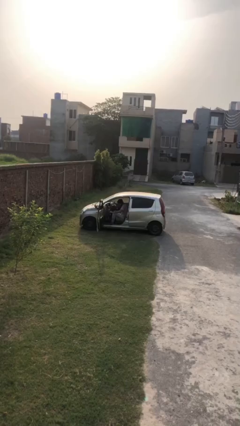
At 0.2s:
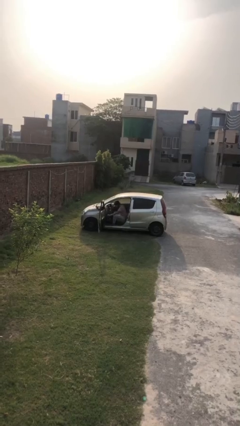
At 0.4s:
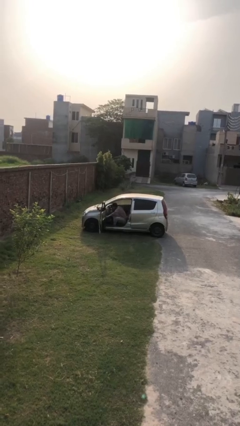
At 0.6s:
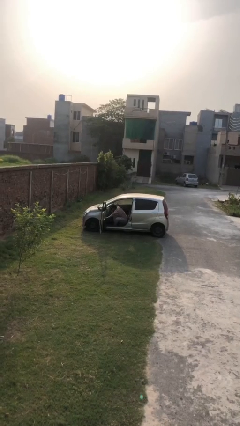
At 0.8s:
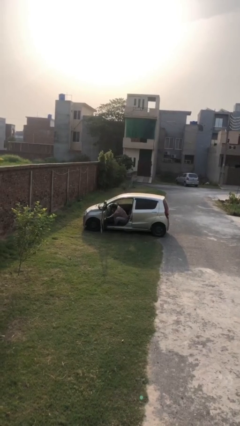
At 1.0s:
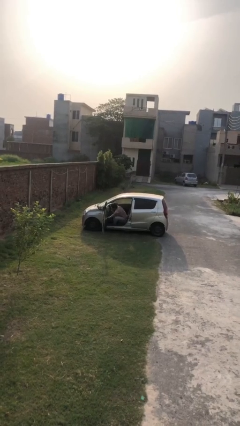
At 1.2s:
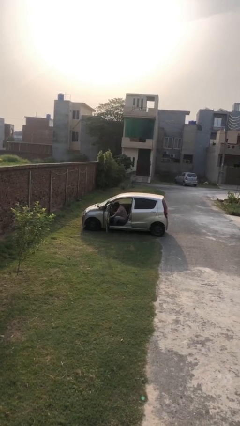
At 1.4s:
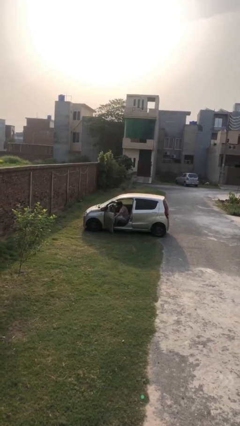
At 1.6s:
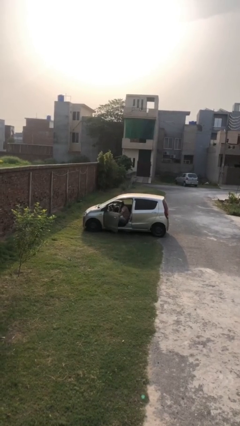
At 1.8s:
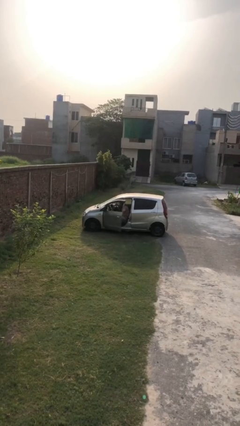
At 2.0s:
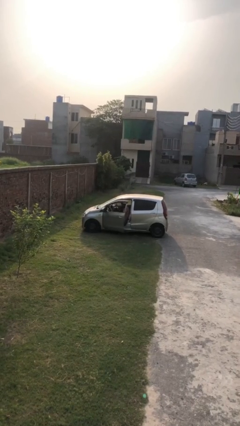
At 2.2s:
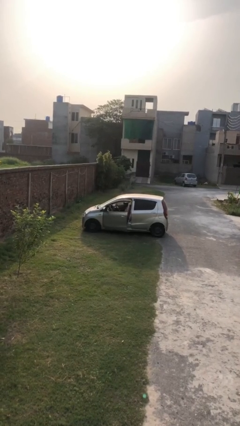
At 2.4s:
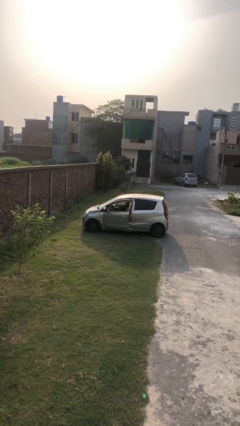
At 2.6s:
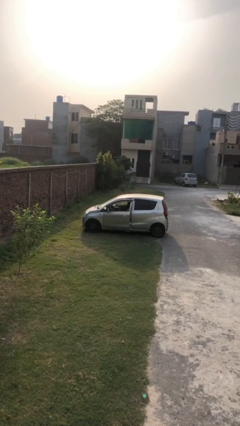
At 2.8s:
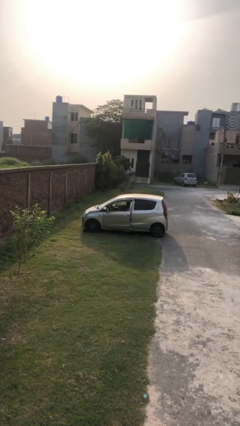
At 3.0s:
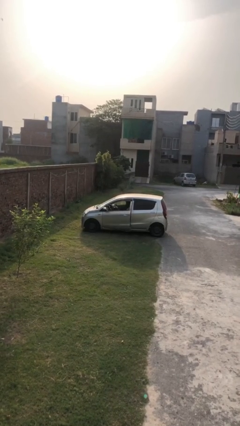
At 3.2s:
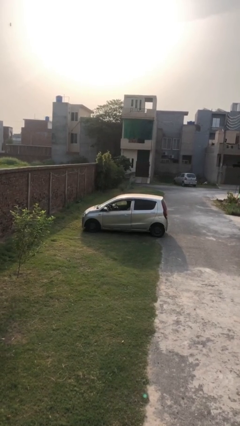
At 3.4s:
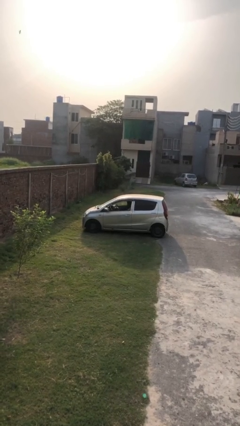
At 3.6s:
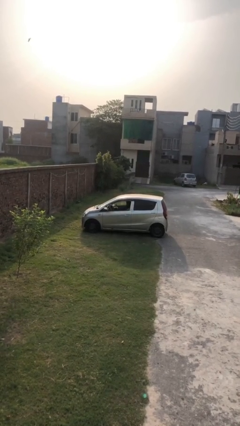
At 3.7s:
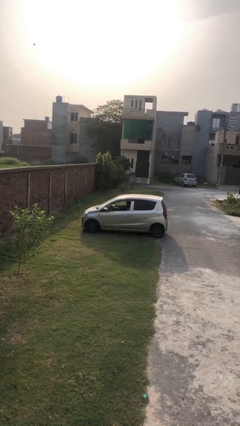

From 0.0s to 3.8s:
person closes car door

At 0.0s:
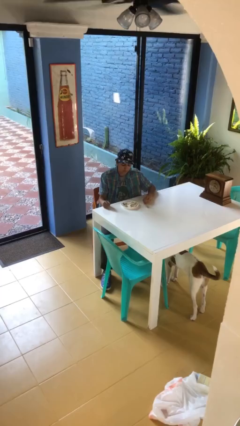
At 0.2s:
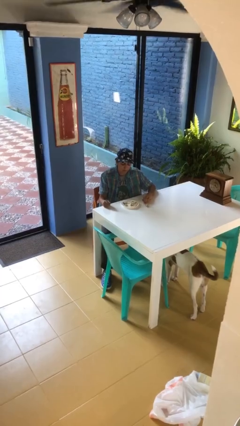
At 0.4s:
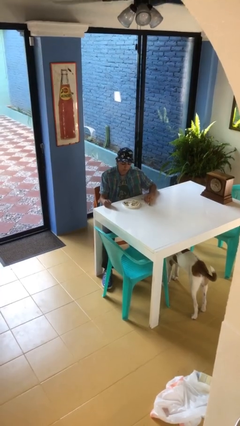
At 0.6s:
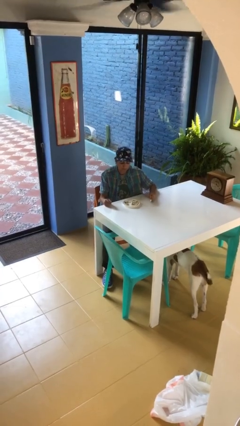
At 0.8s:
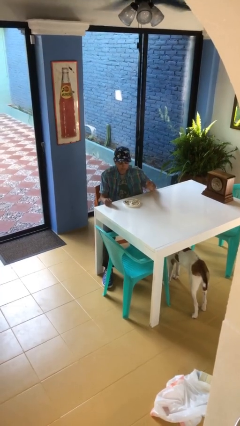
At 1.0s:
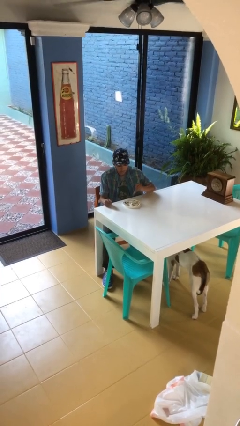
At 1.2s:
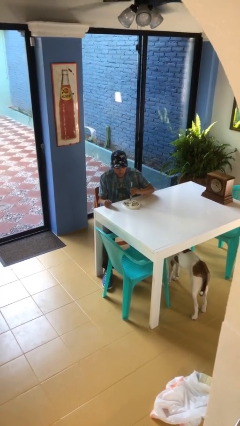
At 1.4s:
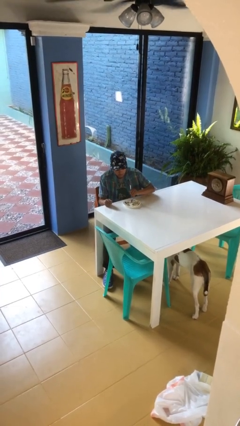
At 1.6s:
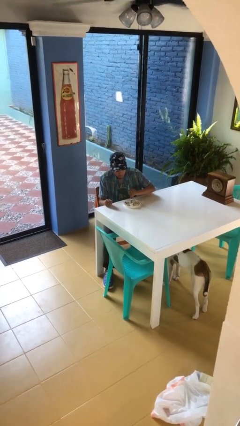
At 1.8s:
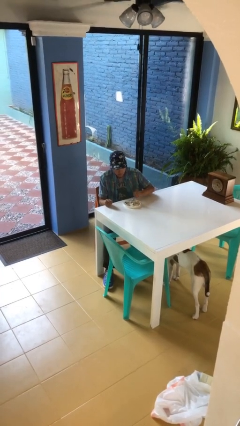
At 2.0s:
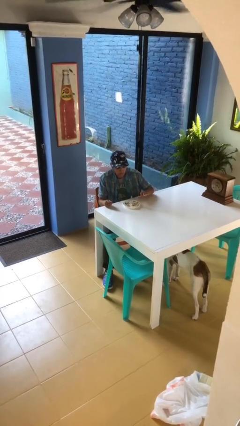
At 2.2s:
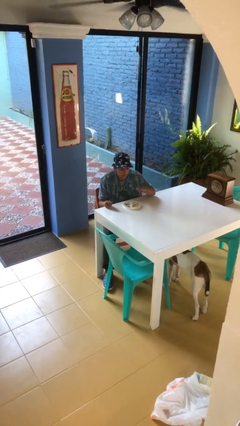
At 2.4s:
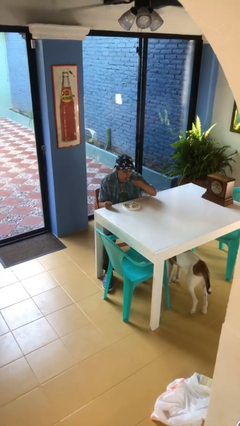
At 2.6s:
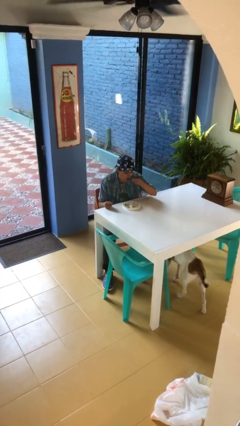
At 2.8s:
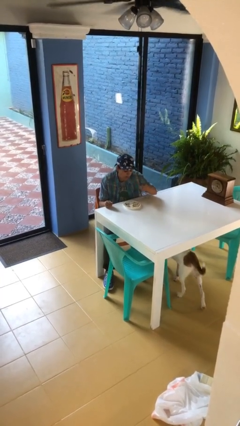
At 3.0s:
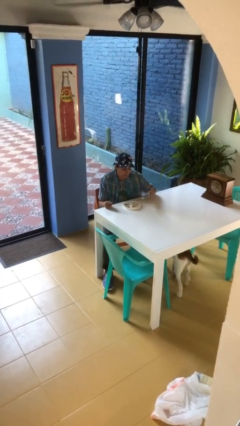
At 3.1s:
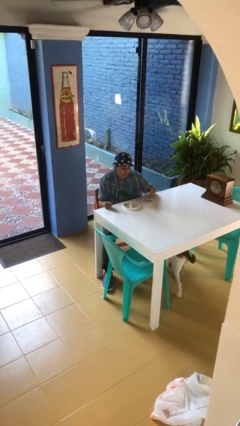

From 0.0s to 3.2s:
person eats with utensil

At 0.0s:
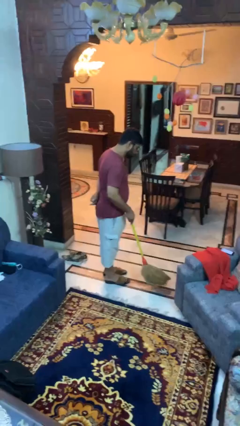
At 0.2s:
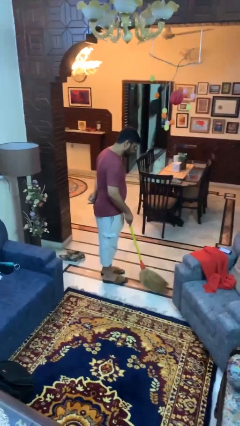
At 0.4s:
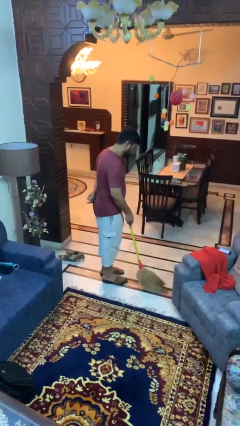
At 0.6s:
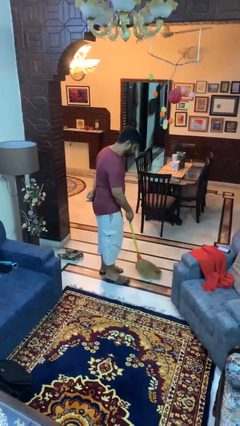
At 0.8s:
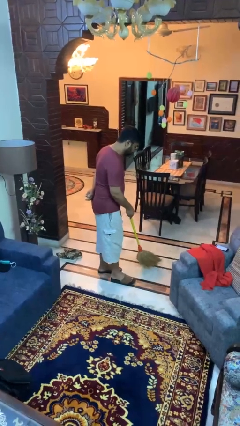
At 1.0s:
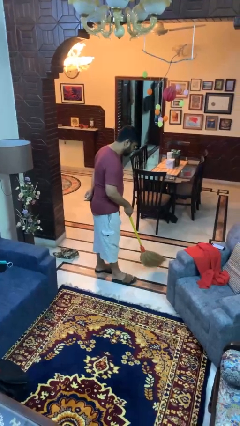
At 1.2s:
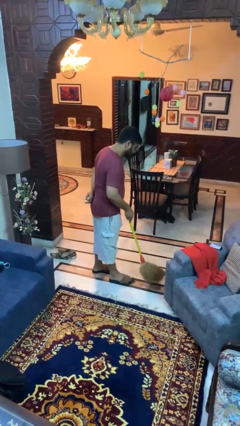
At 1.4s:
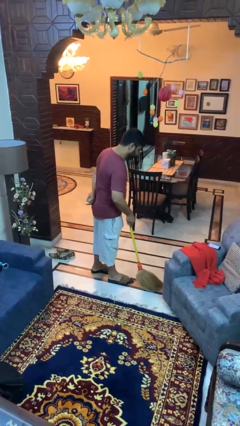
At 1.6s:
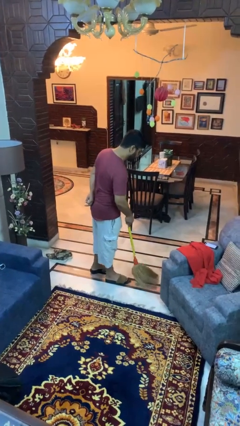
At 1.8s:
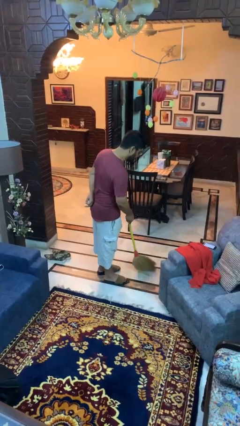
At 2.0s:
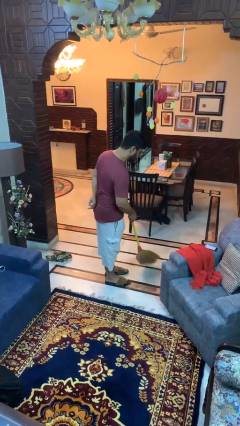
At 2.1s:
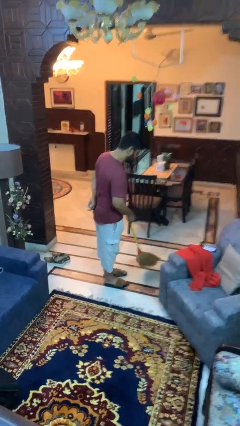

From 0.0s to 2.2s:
person sweeps floor

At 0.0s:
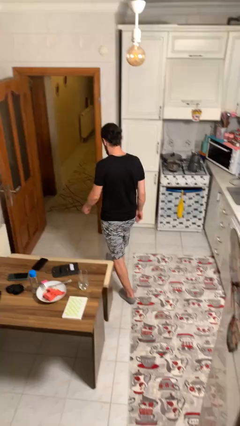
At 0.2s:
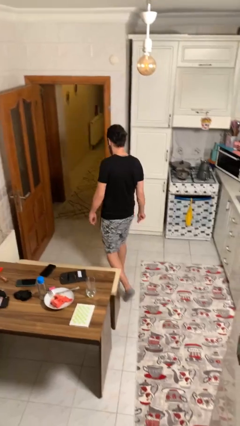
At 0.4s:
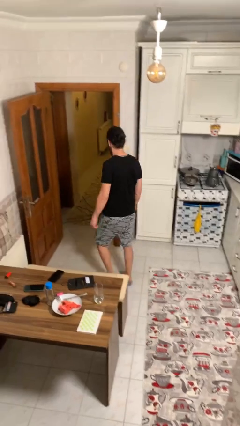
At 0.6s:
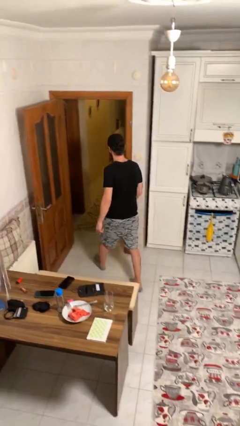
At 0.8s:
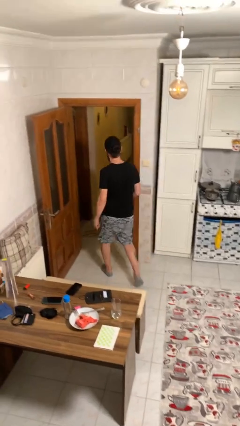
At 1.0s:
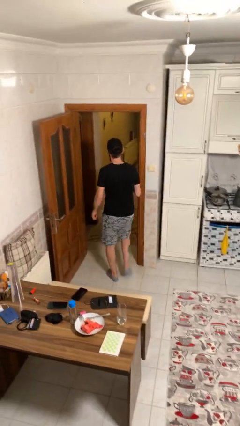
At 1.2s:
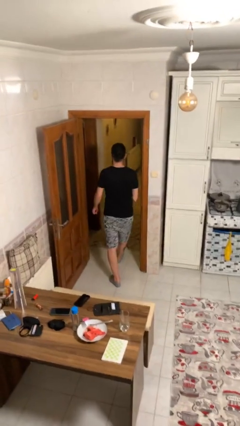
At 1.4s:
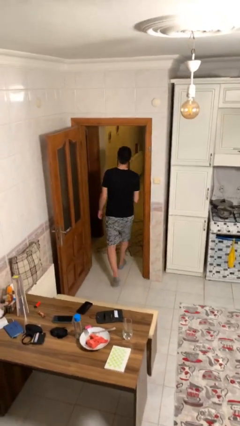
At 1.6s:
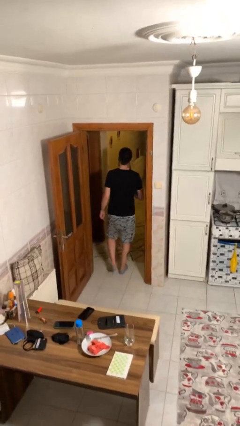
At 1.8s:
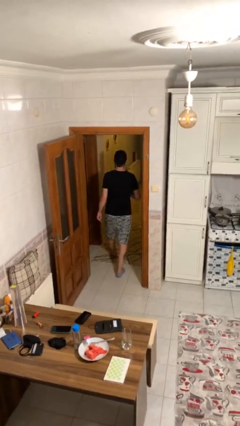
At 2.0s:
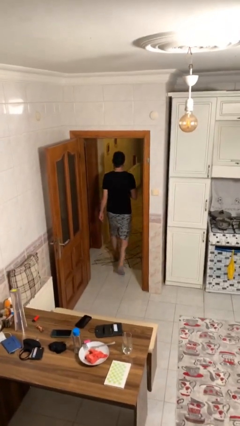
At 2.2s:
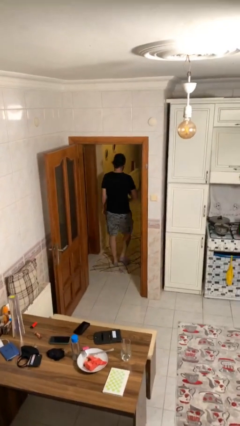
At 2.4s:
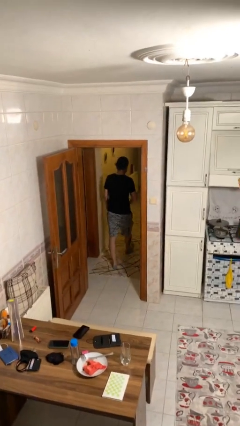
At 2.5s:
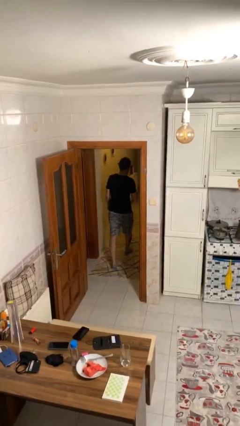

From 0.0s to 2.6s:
person exits scene through structure

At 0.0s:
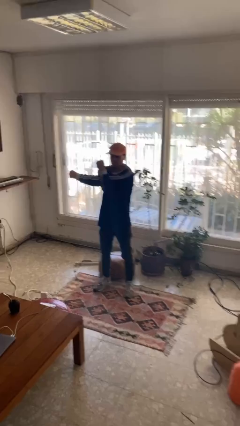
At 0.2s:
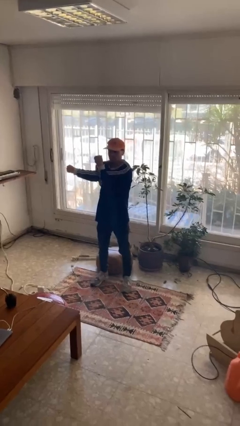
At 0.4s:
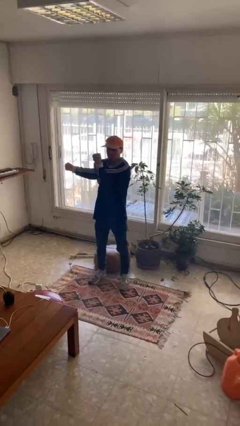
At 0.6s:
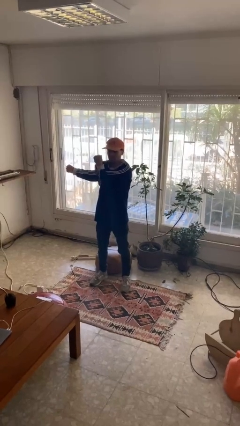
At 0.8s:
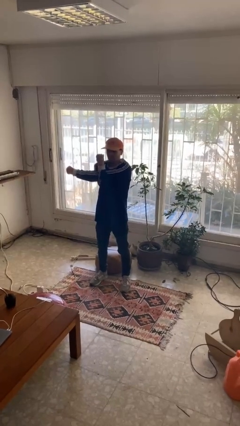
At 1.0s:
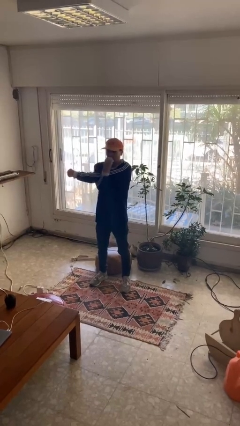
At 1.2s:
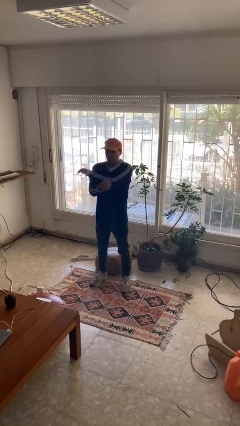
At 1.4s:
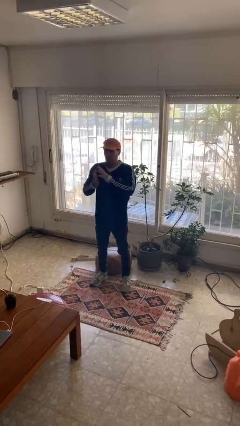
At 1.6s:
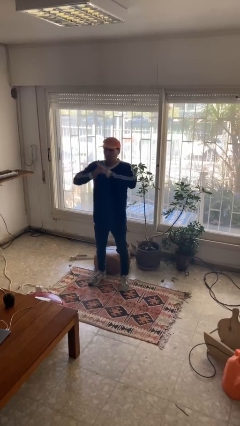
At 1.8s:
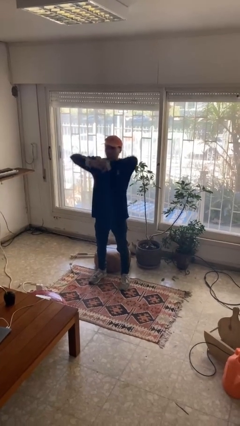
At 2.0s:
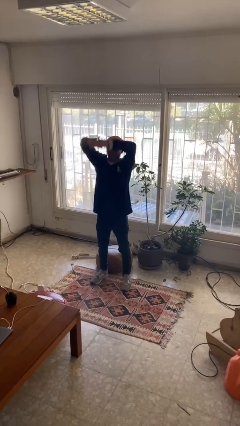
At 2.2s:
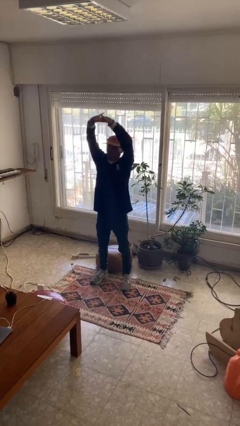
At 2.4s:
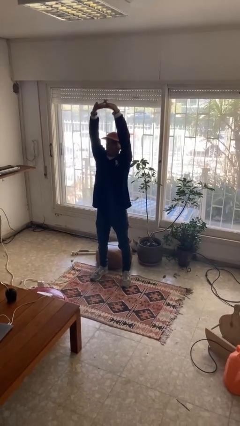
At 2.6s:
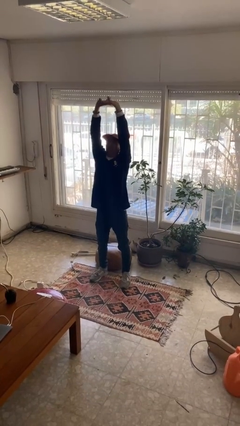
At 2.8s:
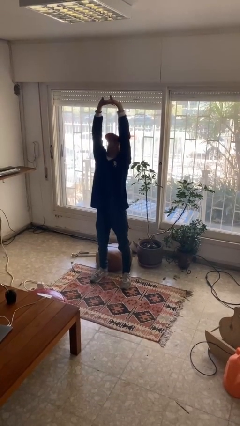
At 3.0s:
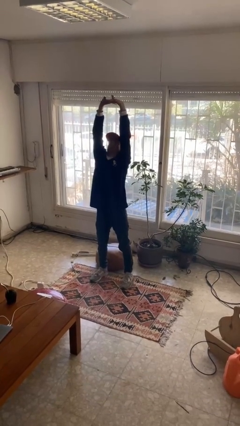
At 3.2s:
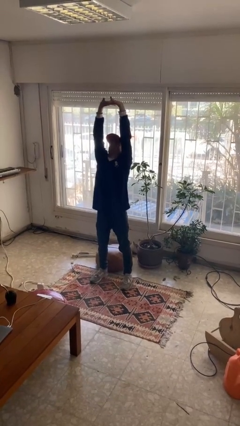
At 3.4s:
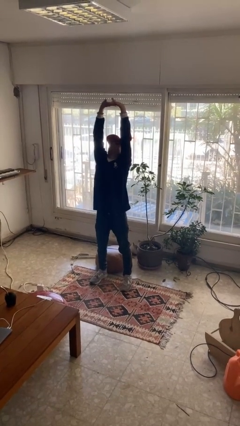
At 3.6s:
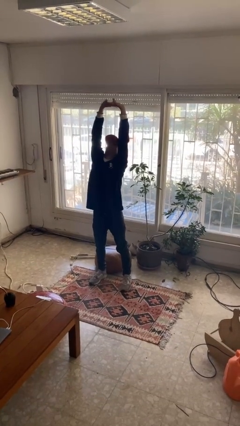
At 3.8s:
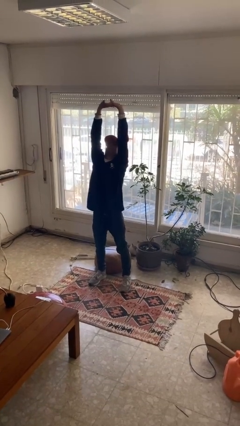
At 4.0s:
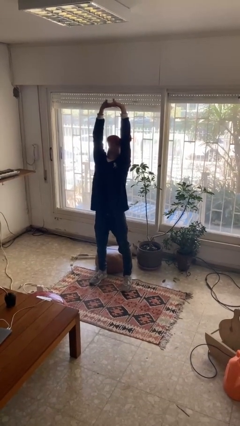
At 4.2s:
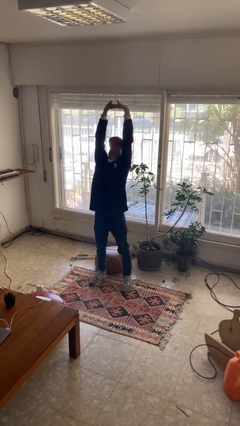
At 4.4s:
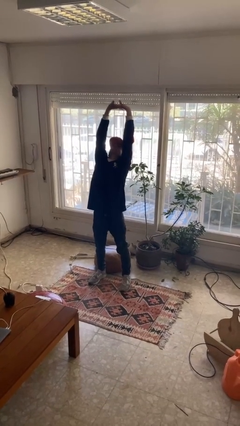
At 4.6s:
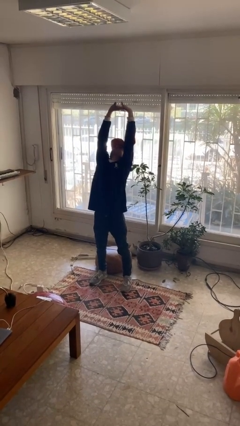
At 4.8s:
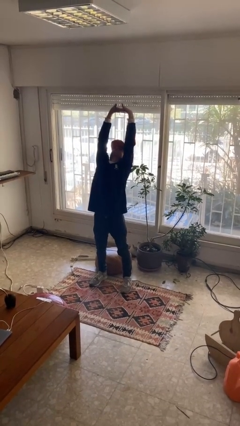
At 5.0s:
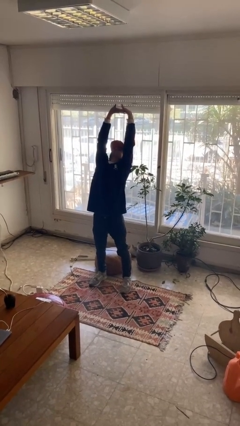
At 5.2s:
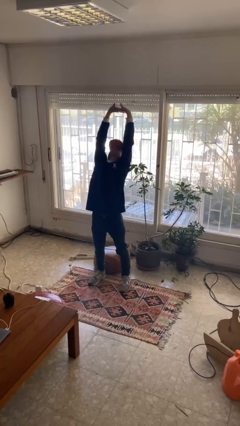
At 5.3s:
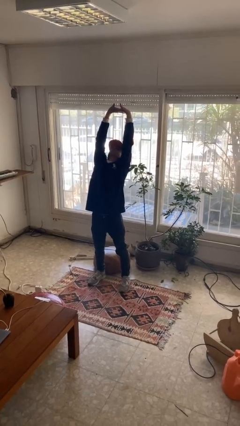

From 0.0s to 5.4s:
person stretches arms over head

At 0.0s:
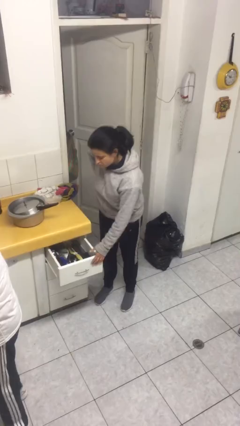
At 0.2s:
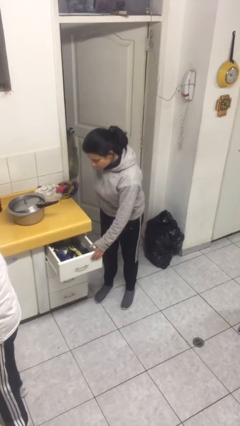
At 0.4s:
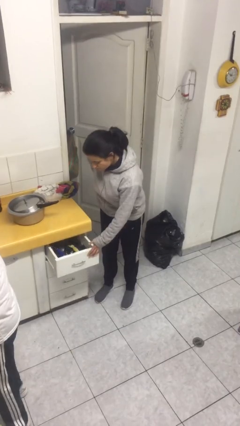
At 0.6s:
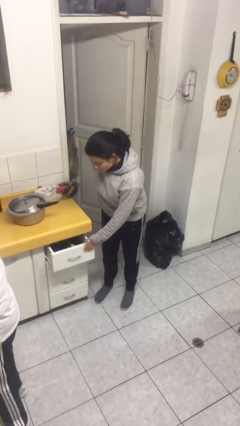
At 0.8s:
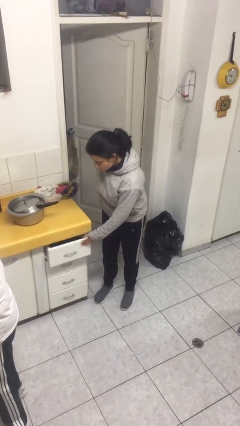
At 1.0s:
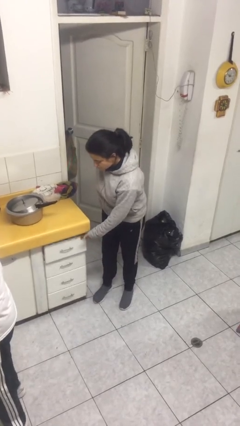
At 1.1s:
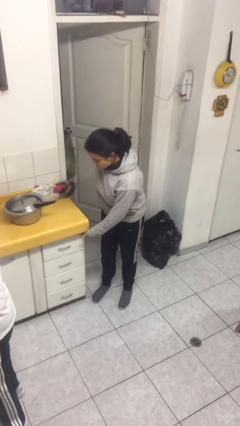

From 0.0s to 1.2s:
person closes kitchen drawer
